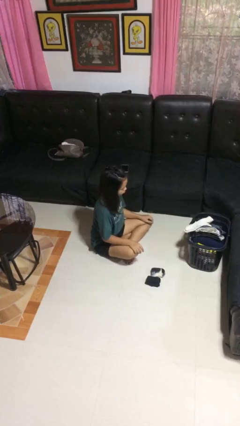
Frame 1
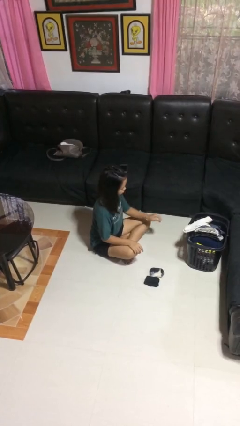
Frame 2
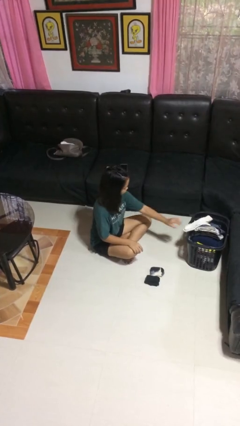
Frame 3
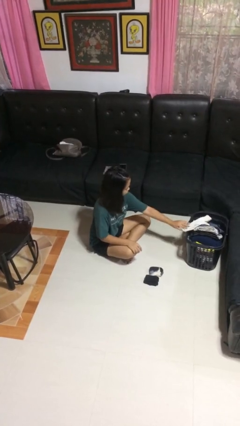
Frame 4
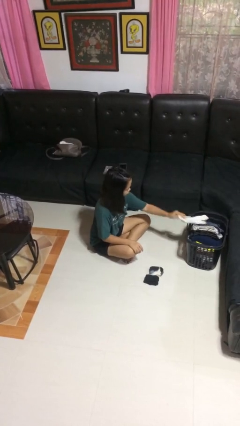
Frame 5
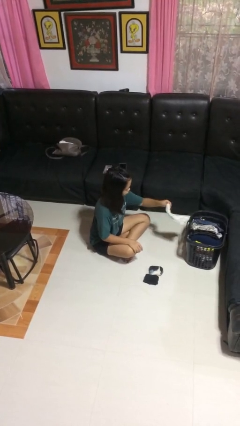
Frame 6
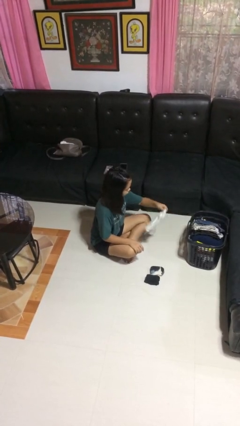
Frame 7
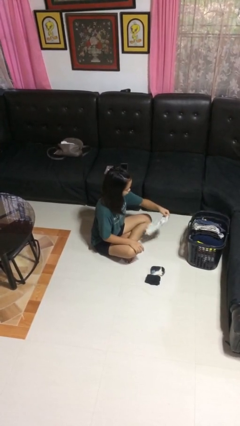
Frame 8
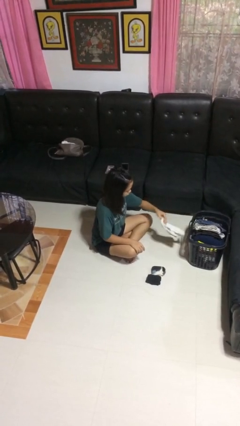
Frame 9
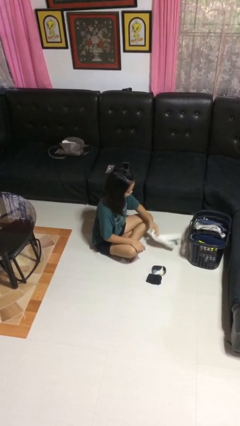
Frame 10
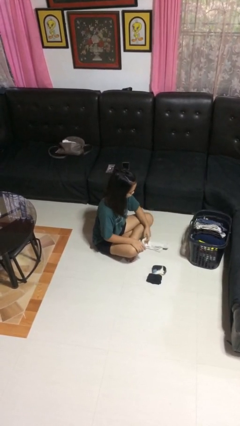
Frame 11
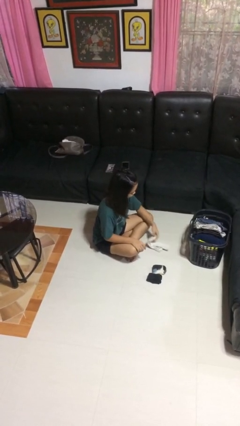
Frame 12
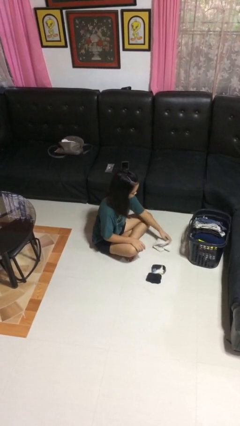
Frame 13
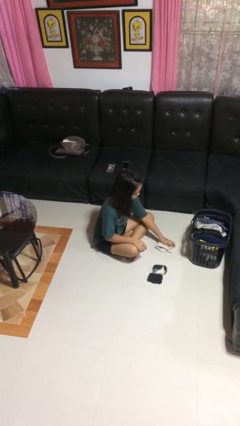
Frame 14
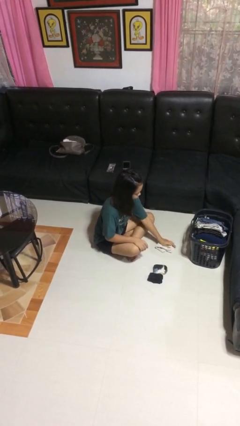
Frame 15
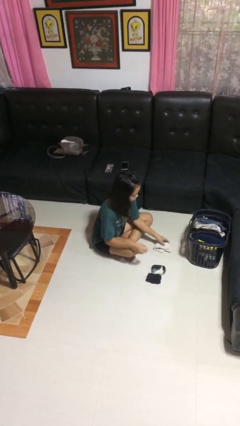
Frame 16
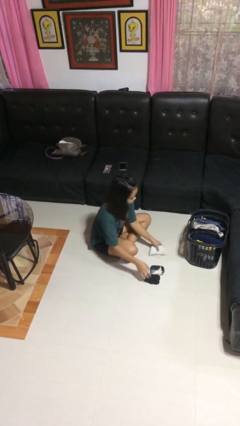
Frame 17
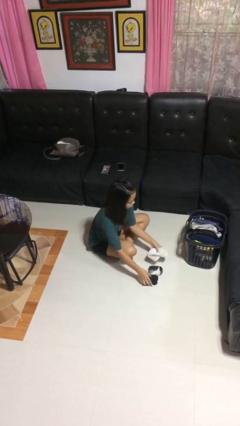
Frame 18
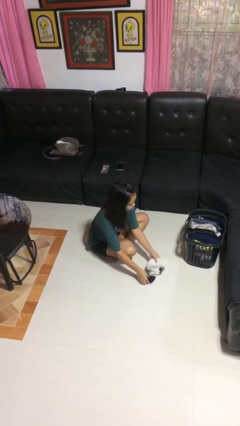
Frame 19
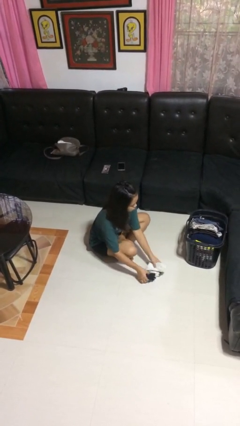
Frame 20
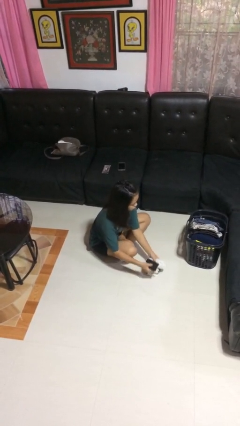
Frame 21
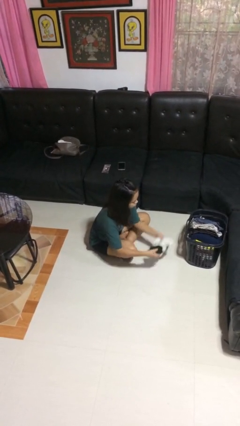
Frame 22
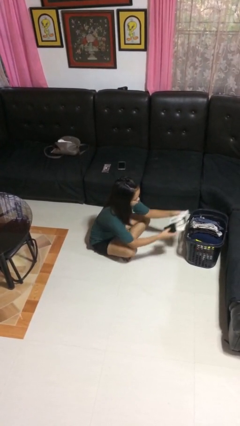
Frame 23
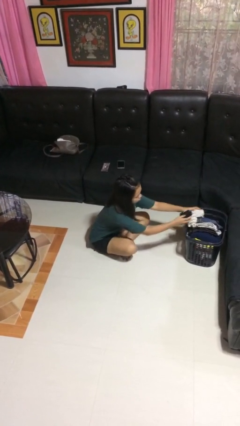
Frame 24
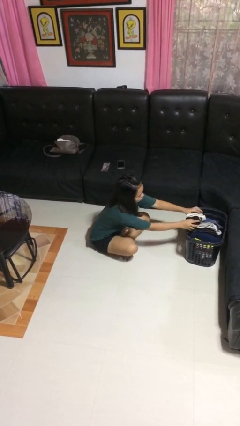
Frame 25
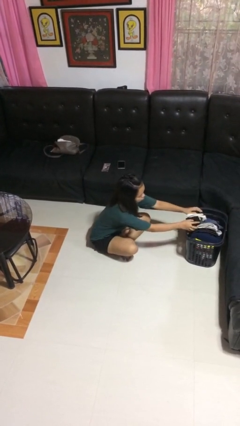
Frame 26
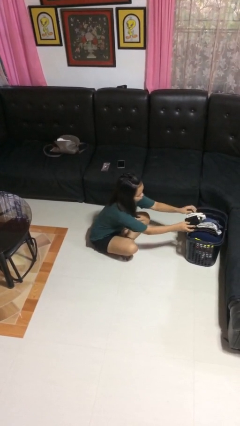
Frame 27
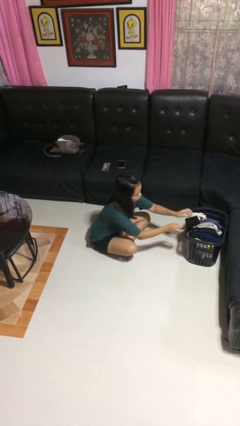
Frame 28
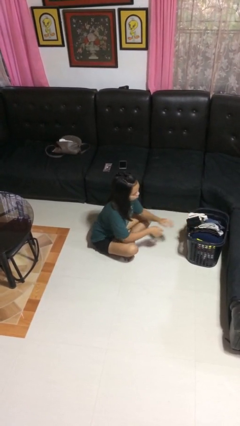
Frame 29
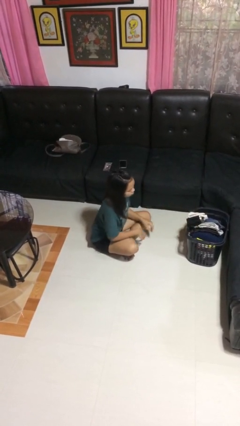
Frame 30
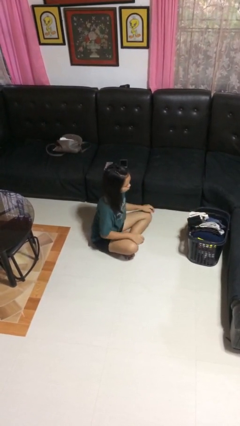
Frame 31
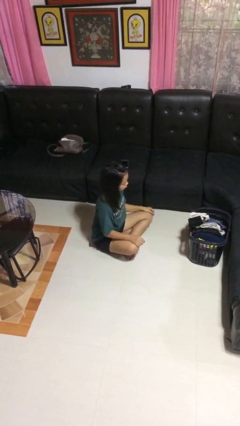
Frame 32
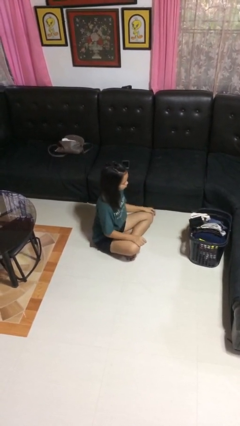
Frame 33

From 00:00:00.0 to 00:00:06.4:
person folds socks

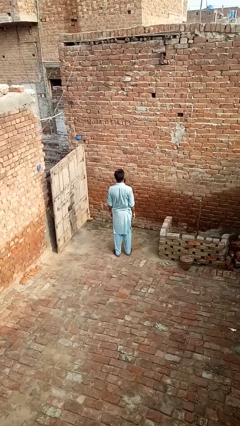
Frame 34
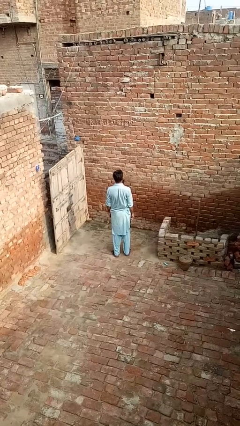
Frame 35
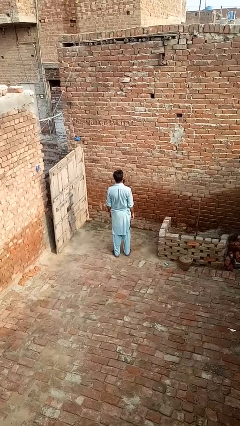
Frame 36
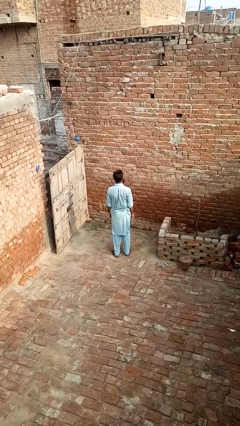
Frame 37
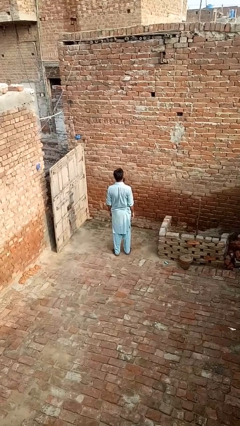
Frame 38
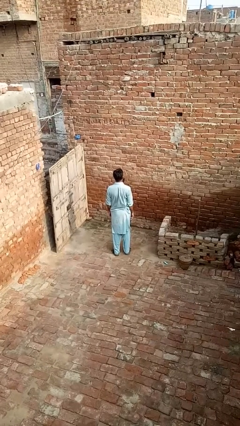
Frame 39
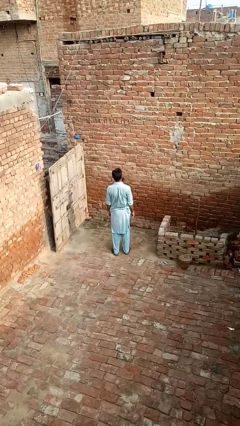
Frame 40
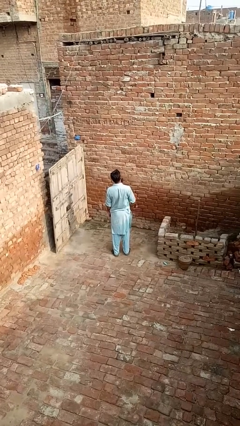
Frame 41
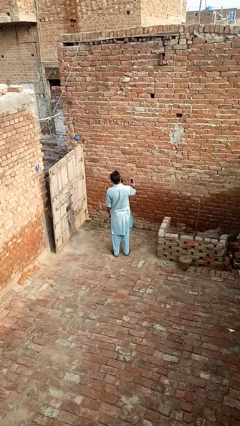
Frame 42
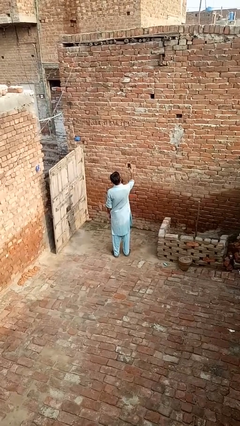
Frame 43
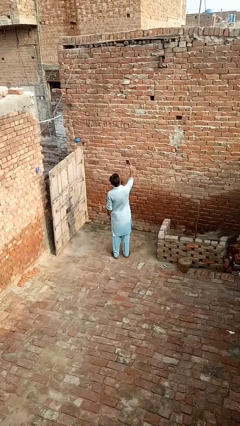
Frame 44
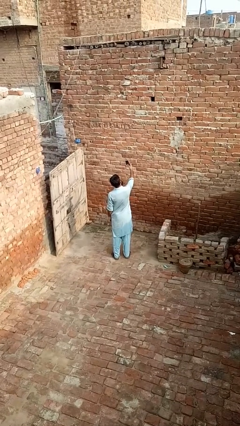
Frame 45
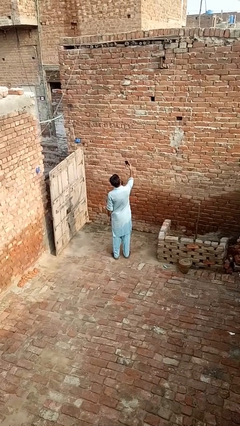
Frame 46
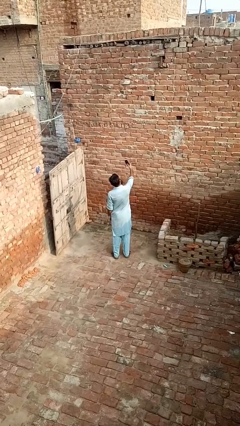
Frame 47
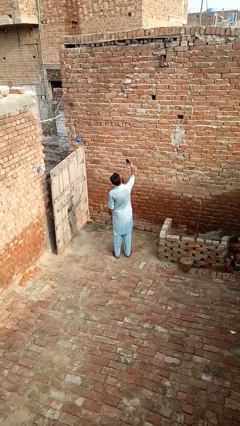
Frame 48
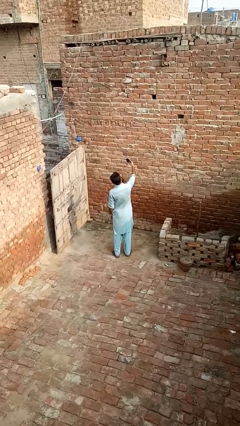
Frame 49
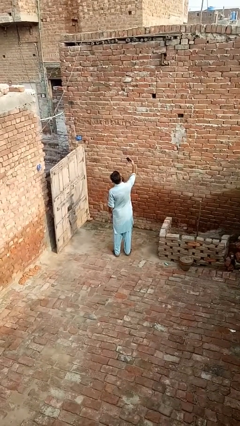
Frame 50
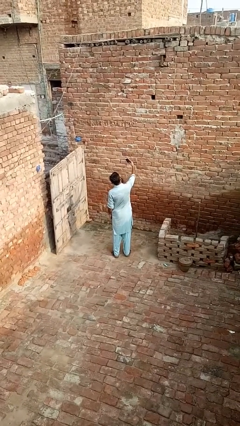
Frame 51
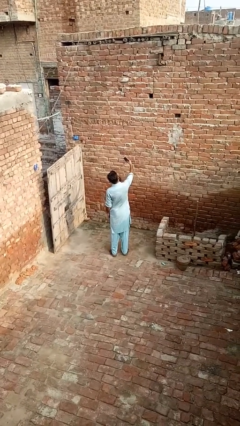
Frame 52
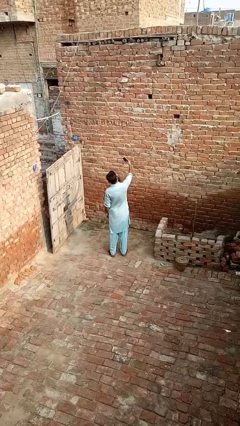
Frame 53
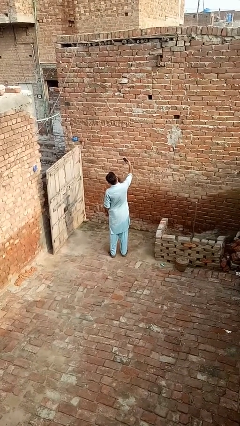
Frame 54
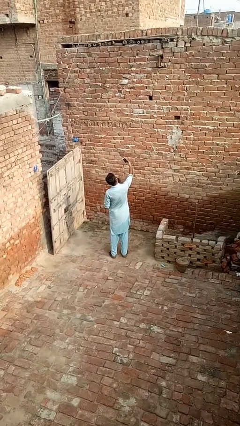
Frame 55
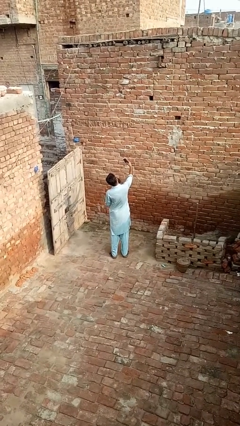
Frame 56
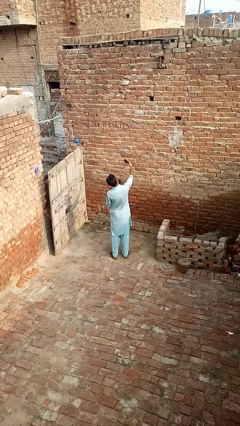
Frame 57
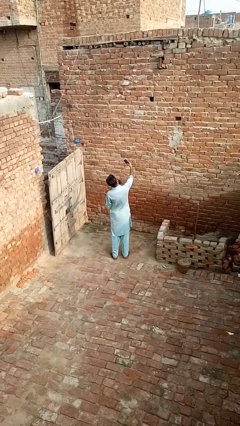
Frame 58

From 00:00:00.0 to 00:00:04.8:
person takes selfie

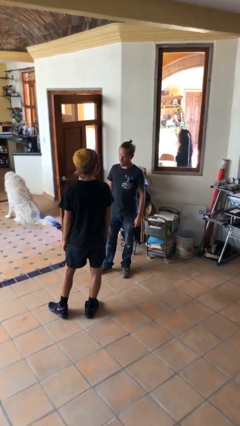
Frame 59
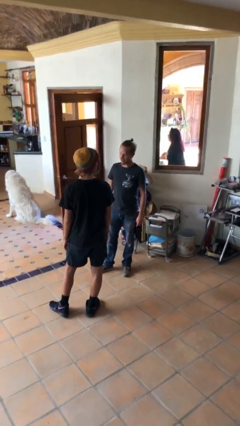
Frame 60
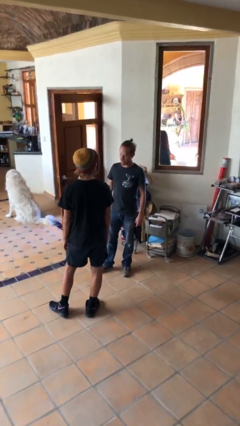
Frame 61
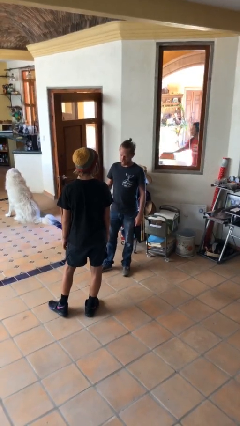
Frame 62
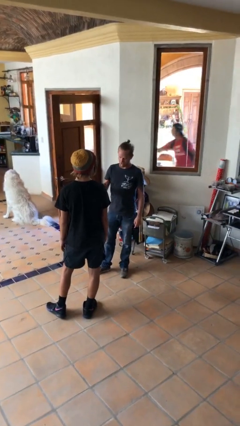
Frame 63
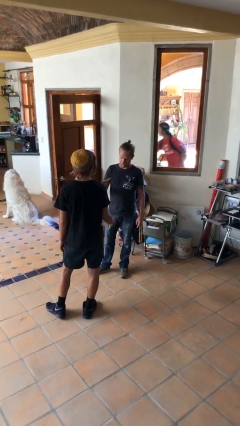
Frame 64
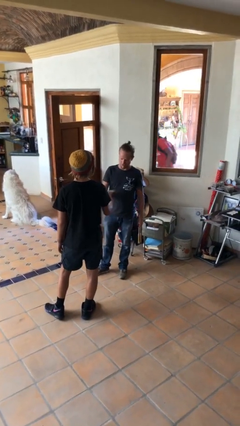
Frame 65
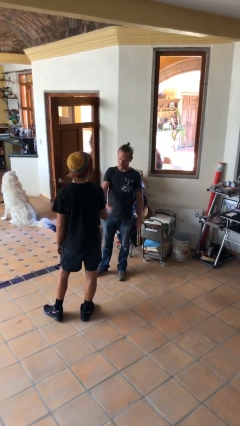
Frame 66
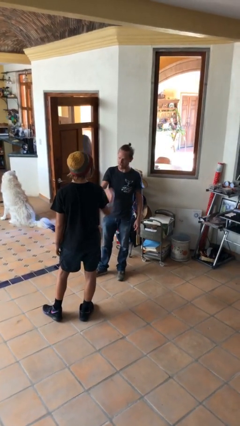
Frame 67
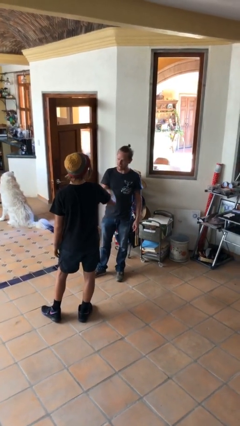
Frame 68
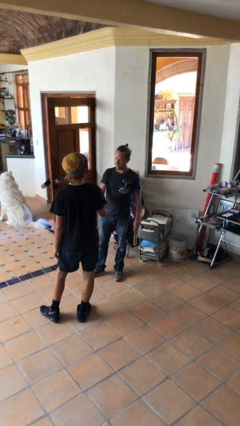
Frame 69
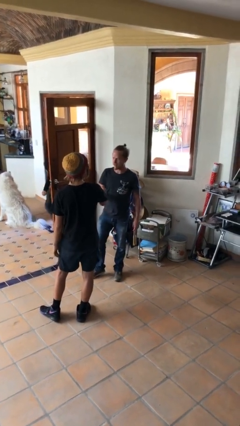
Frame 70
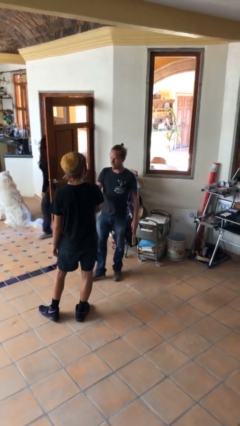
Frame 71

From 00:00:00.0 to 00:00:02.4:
person shakes hand

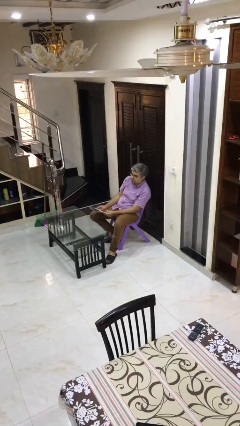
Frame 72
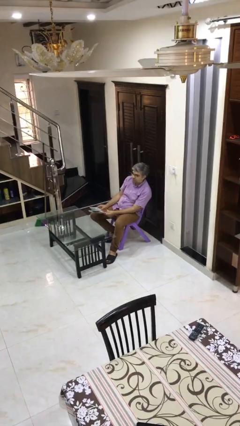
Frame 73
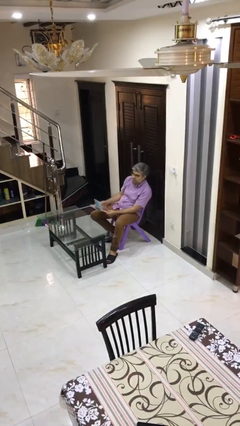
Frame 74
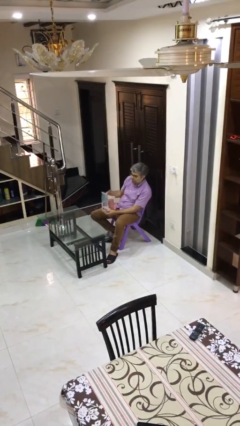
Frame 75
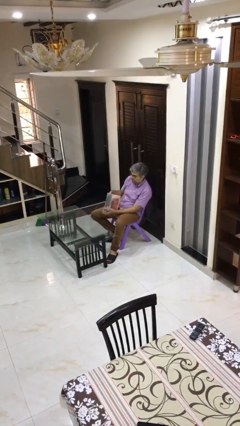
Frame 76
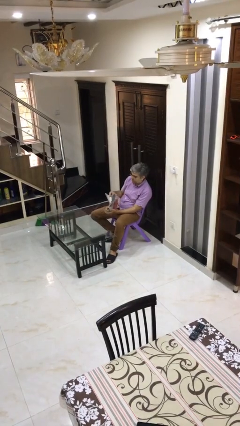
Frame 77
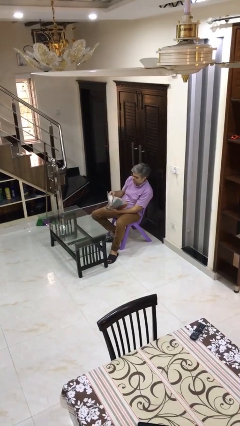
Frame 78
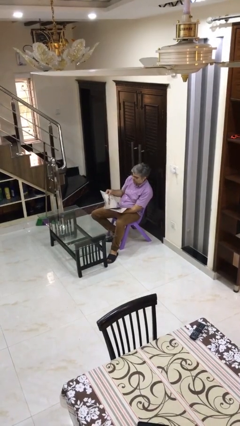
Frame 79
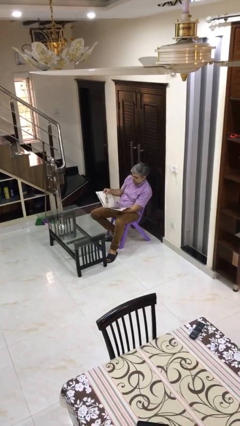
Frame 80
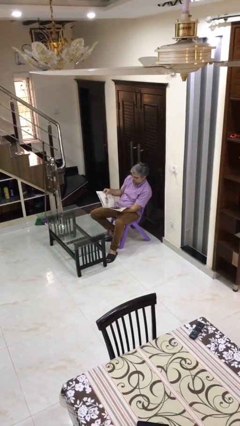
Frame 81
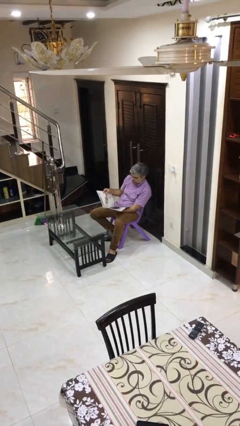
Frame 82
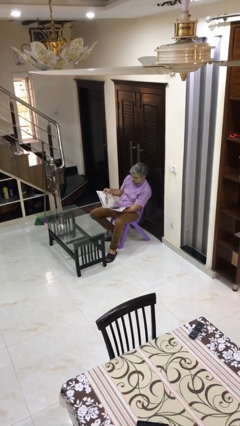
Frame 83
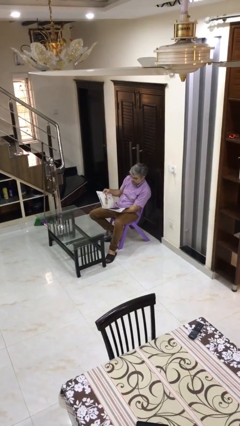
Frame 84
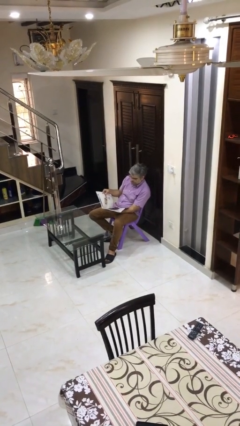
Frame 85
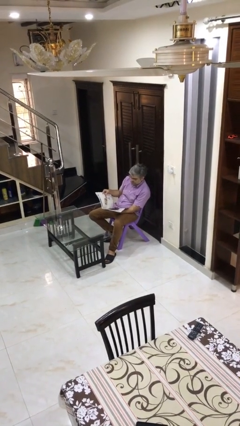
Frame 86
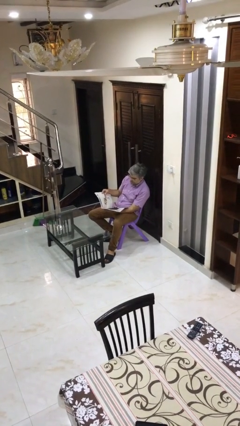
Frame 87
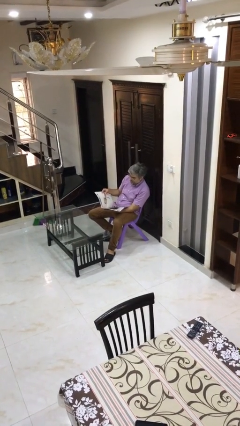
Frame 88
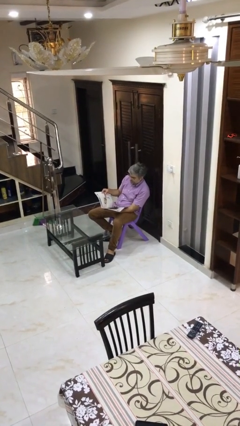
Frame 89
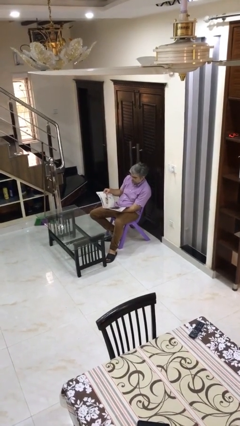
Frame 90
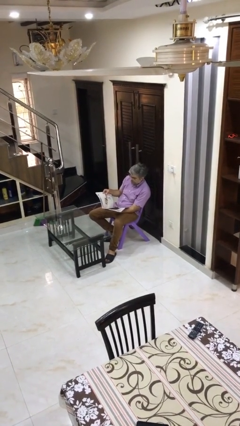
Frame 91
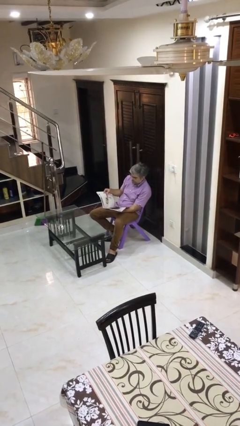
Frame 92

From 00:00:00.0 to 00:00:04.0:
person reads document
